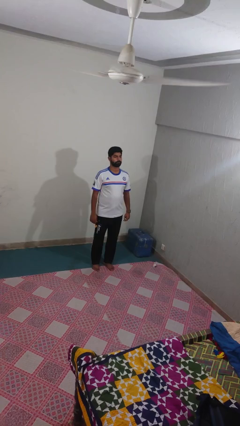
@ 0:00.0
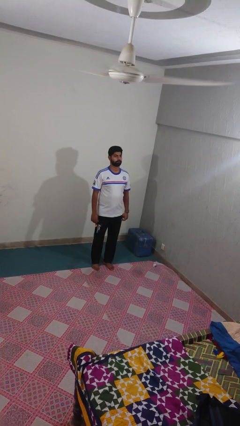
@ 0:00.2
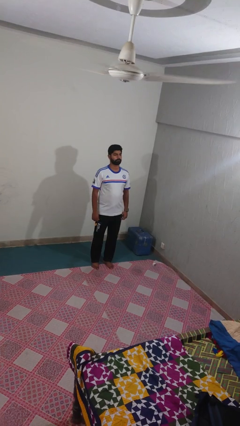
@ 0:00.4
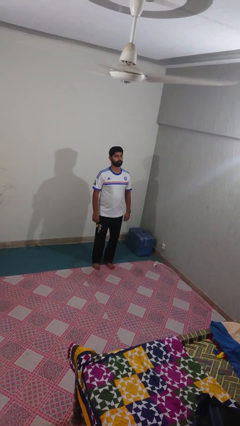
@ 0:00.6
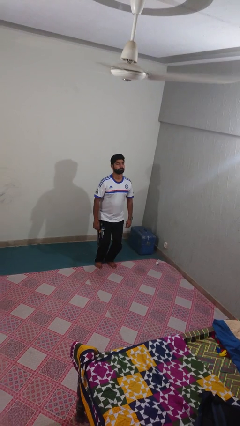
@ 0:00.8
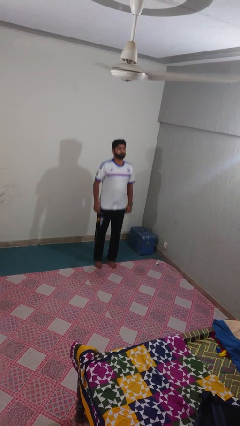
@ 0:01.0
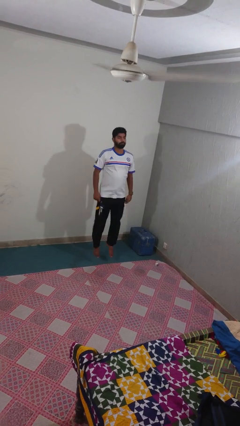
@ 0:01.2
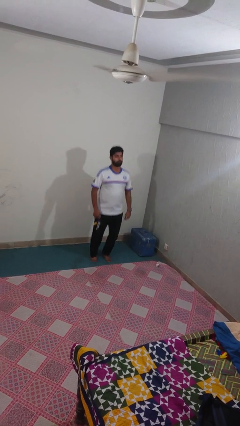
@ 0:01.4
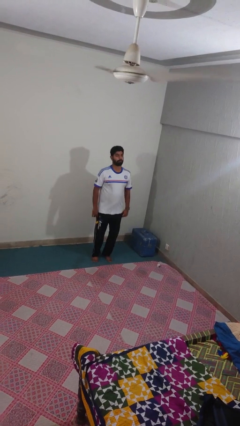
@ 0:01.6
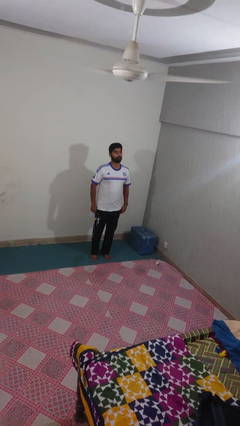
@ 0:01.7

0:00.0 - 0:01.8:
person jumps

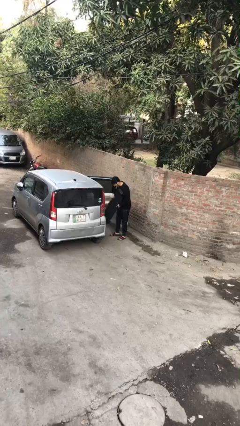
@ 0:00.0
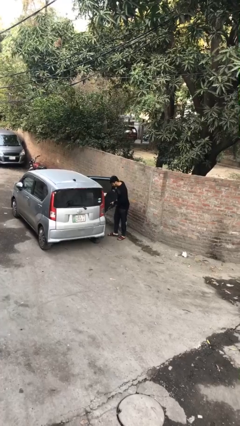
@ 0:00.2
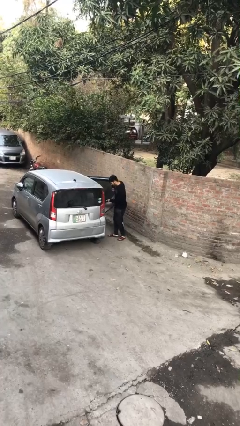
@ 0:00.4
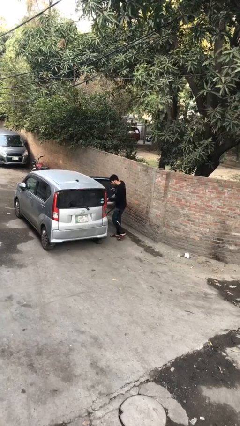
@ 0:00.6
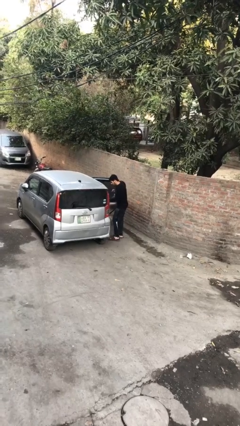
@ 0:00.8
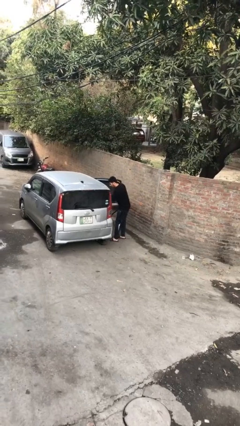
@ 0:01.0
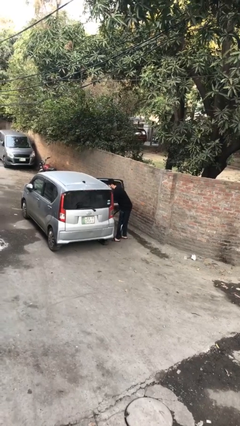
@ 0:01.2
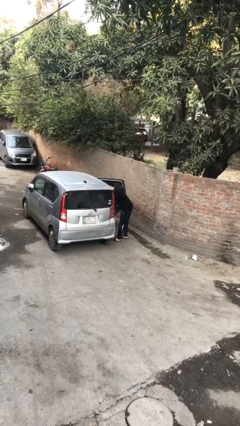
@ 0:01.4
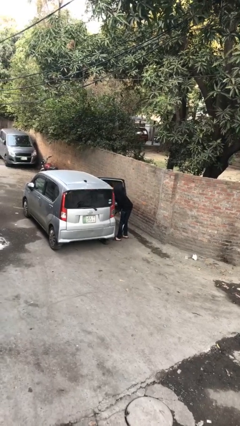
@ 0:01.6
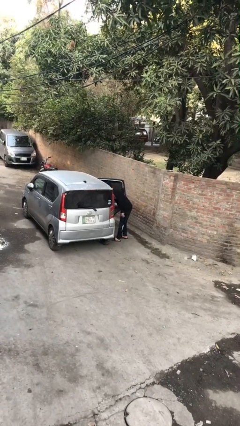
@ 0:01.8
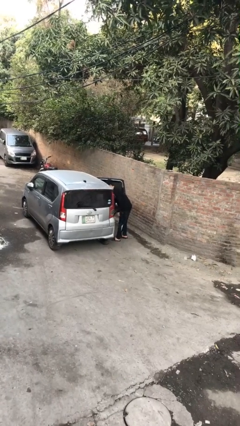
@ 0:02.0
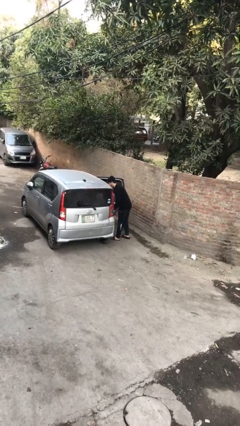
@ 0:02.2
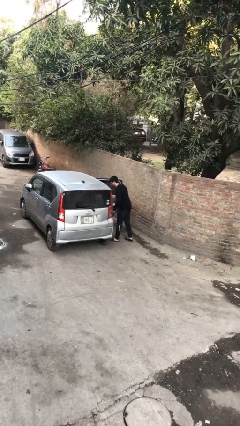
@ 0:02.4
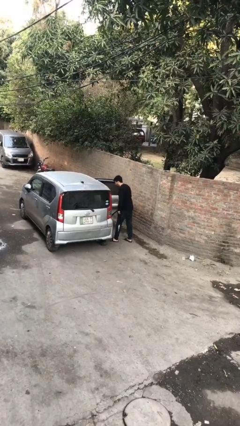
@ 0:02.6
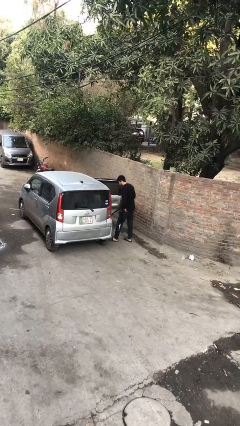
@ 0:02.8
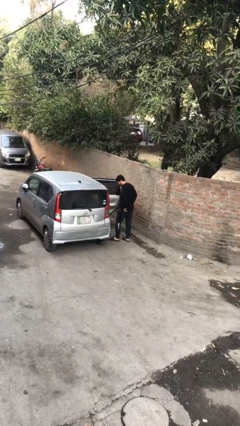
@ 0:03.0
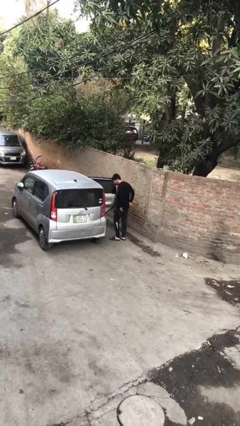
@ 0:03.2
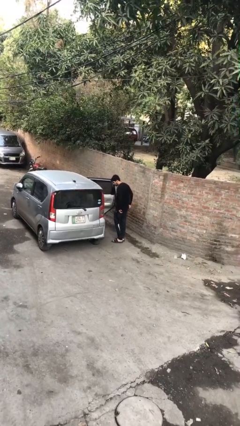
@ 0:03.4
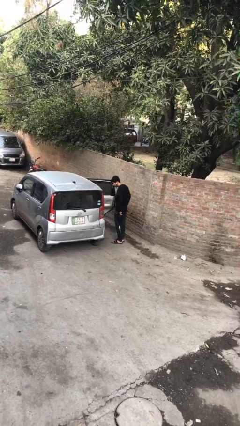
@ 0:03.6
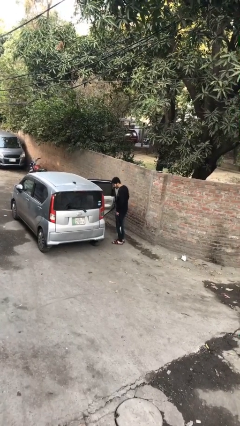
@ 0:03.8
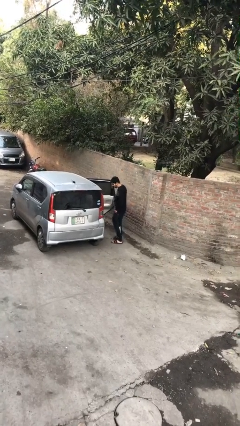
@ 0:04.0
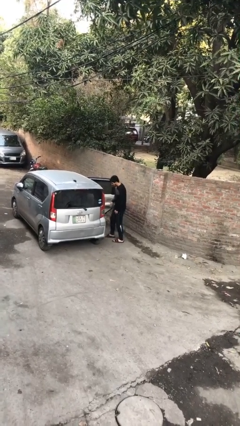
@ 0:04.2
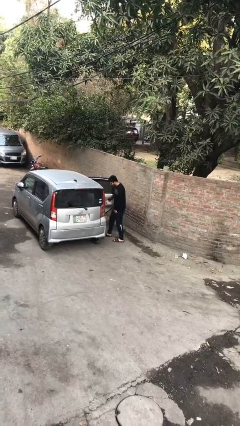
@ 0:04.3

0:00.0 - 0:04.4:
person loads car

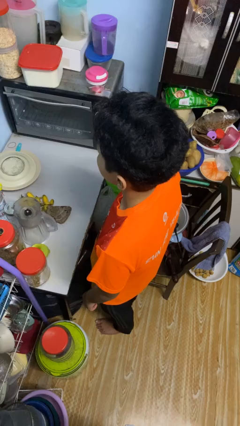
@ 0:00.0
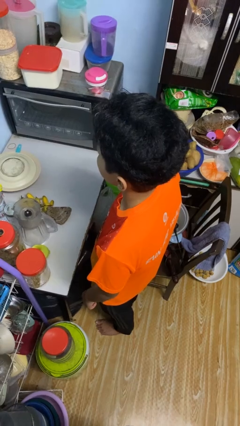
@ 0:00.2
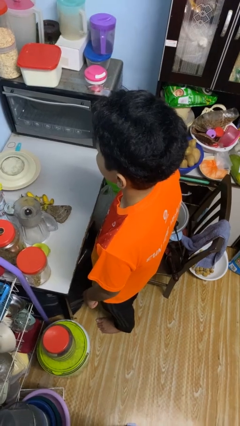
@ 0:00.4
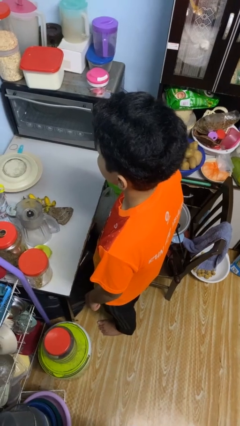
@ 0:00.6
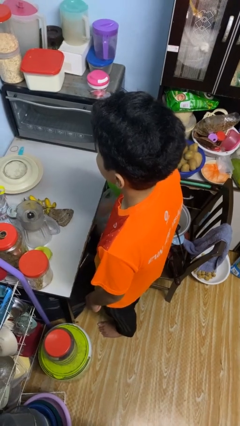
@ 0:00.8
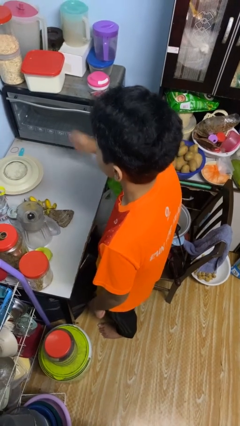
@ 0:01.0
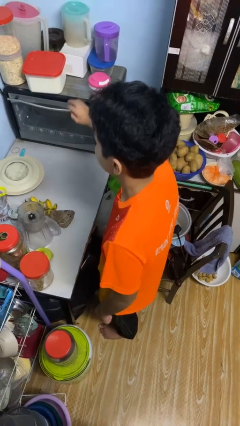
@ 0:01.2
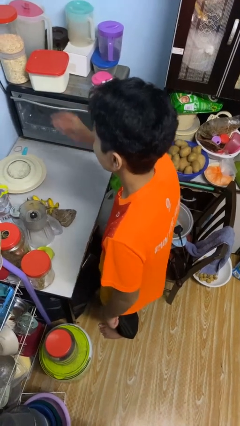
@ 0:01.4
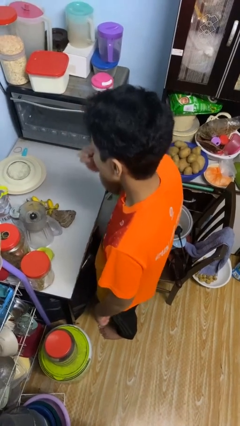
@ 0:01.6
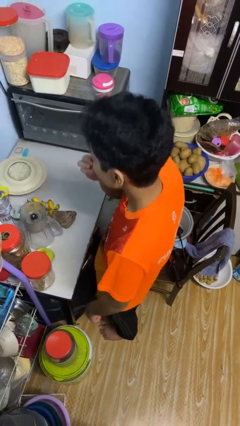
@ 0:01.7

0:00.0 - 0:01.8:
person burns hand

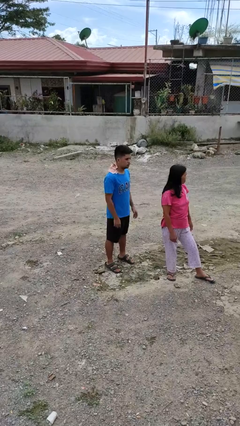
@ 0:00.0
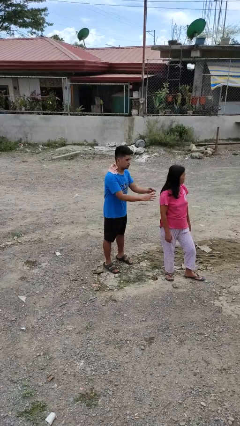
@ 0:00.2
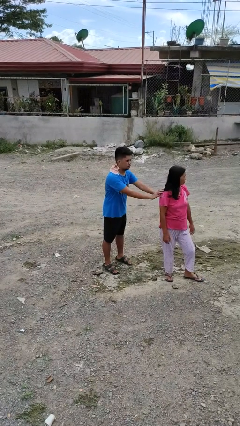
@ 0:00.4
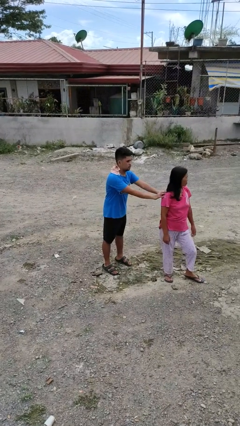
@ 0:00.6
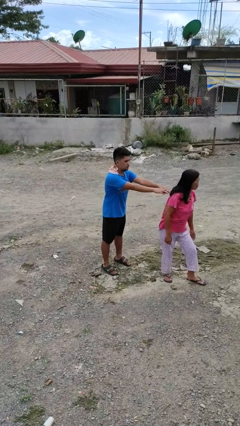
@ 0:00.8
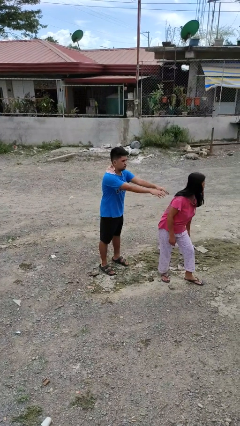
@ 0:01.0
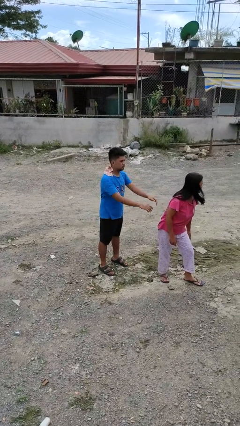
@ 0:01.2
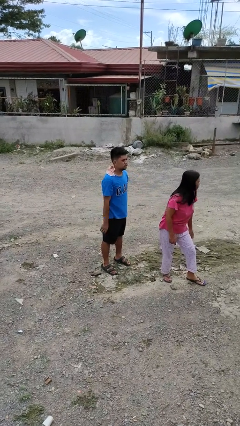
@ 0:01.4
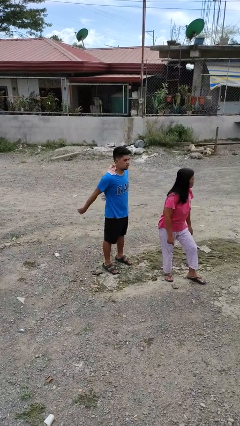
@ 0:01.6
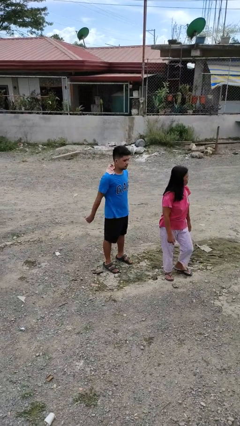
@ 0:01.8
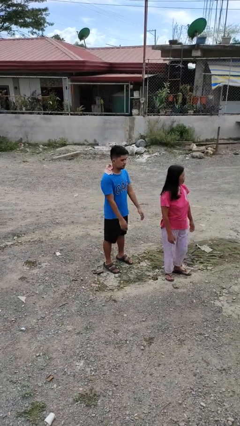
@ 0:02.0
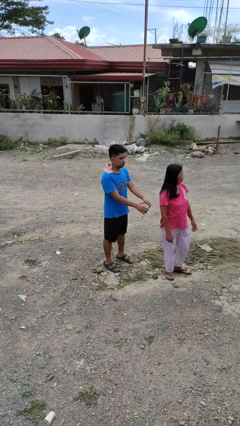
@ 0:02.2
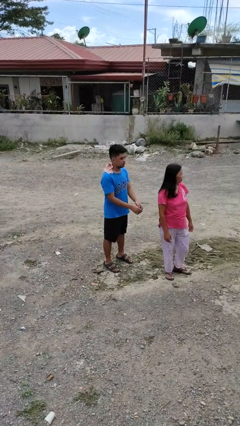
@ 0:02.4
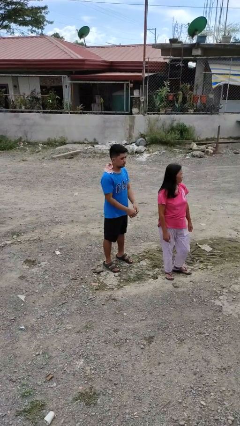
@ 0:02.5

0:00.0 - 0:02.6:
person shoves person

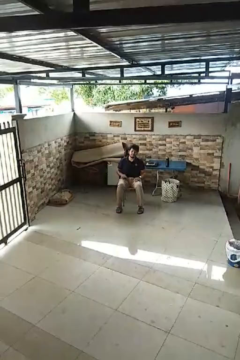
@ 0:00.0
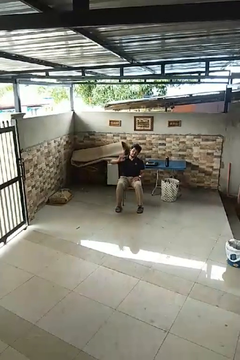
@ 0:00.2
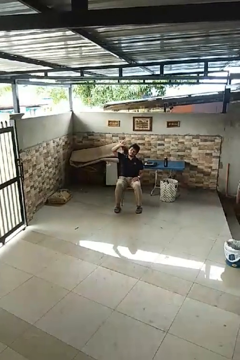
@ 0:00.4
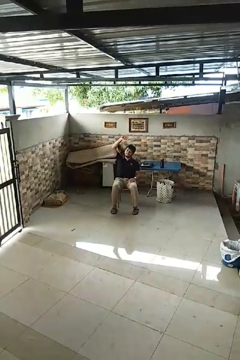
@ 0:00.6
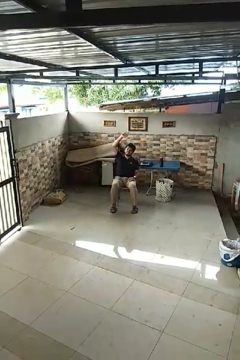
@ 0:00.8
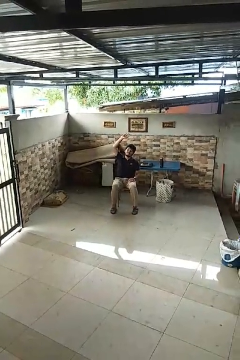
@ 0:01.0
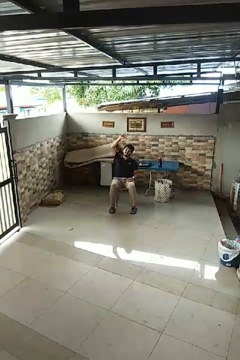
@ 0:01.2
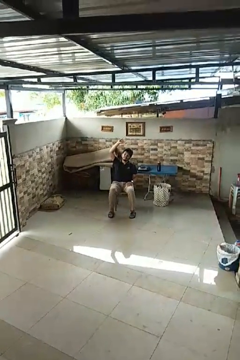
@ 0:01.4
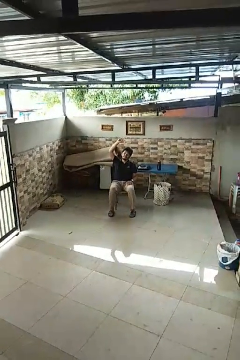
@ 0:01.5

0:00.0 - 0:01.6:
person gestures raise hand

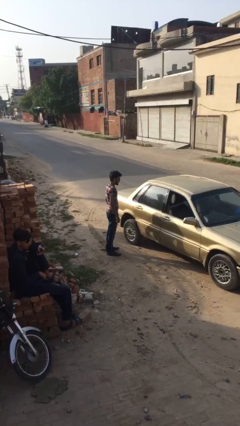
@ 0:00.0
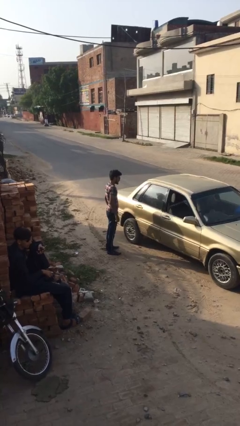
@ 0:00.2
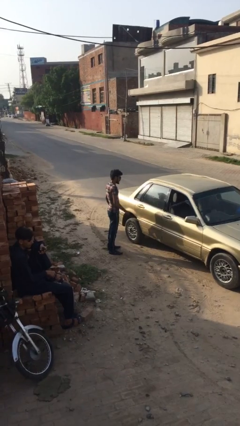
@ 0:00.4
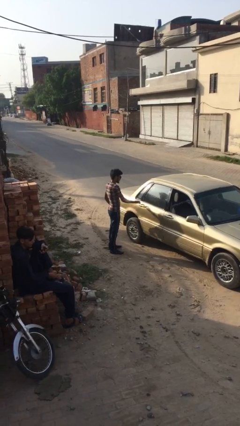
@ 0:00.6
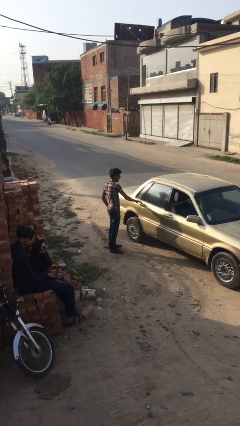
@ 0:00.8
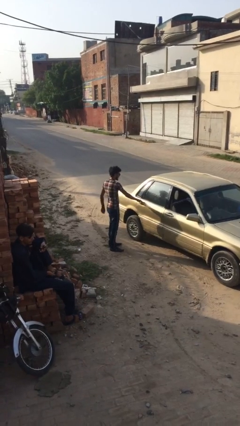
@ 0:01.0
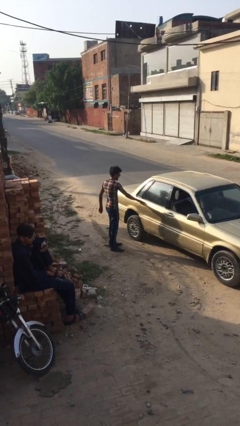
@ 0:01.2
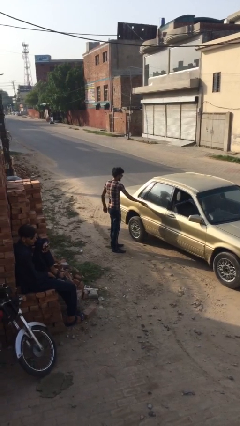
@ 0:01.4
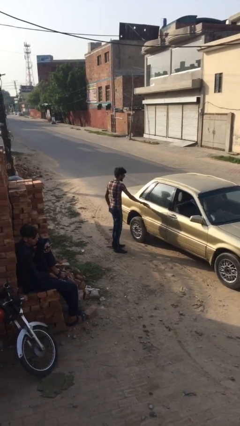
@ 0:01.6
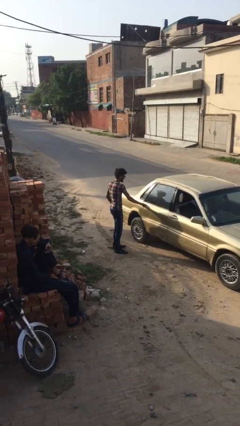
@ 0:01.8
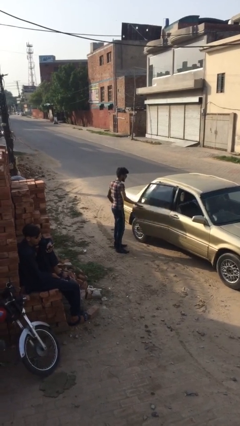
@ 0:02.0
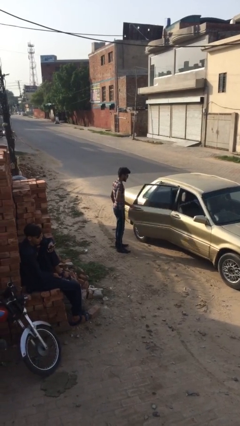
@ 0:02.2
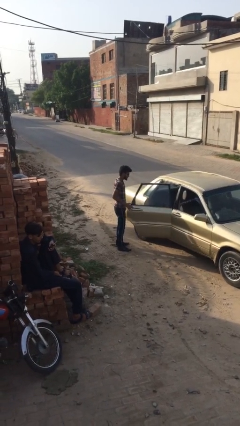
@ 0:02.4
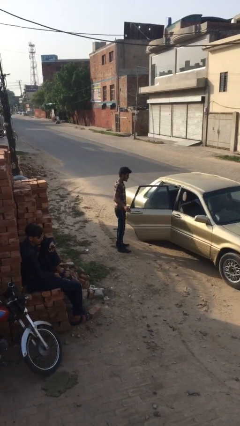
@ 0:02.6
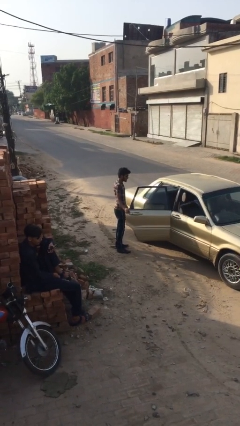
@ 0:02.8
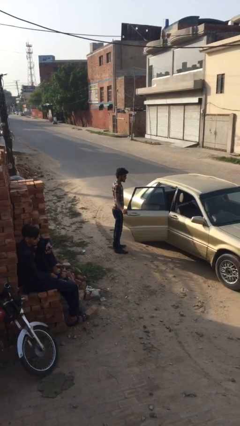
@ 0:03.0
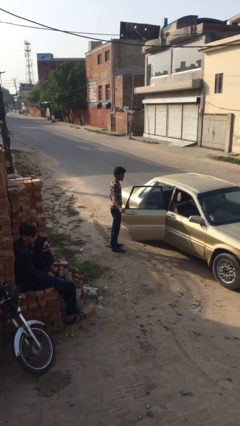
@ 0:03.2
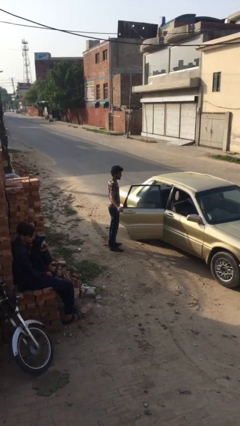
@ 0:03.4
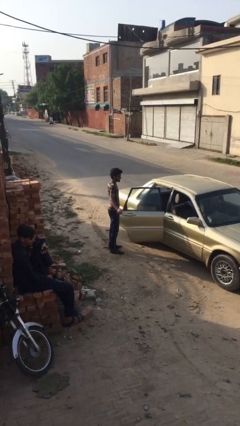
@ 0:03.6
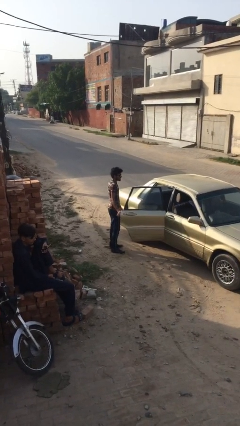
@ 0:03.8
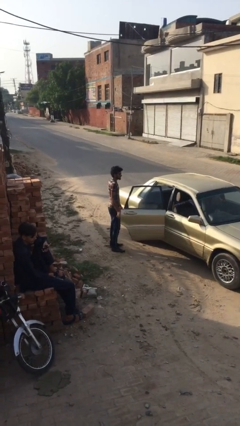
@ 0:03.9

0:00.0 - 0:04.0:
person opens car door

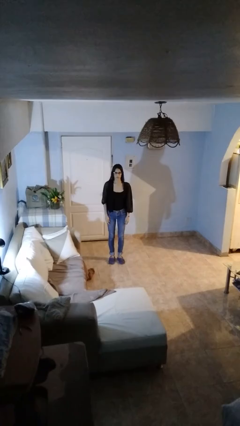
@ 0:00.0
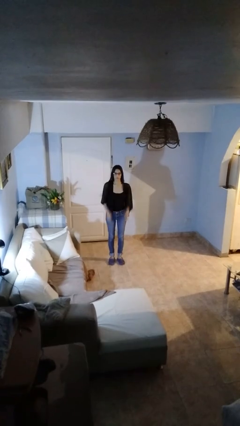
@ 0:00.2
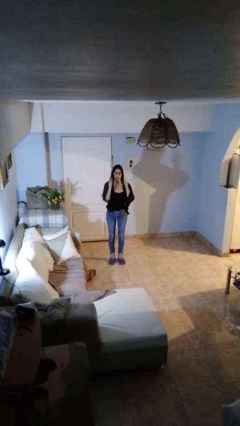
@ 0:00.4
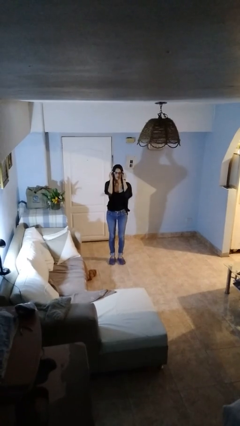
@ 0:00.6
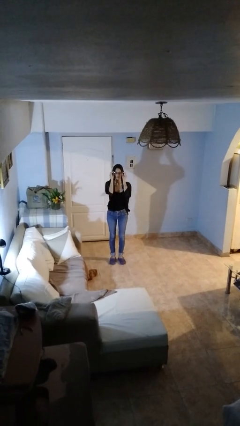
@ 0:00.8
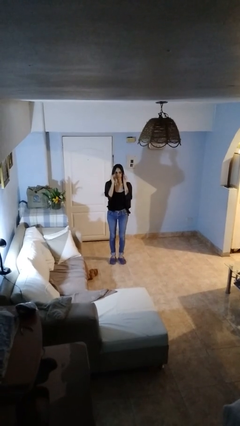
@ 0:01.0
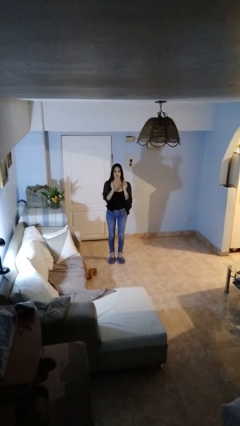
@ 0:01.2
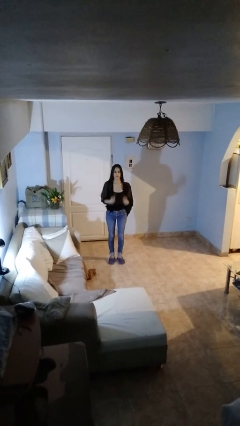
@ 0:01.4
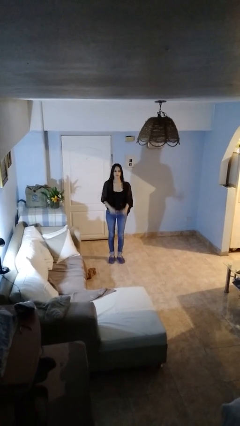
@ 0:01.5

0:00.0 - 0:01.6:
person takes off glasses
